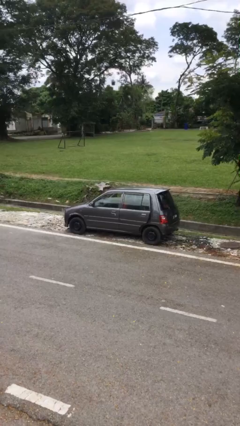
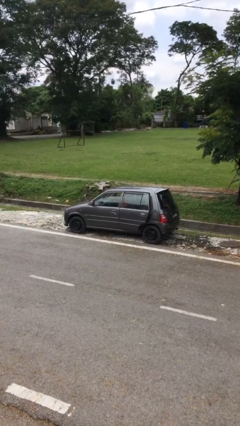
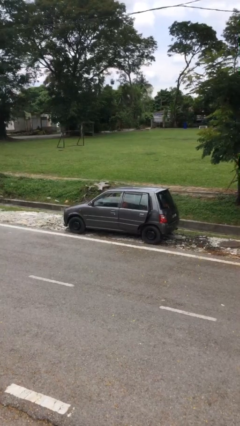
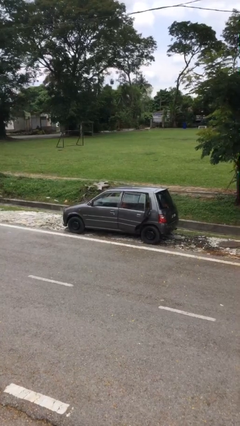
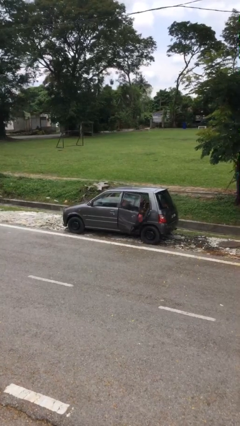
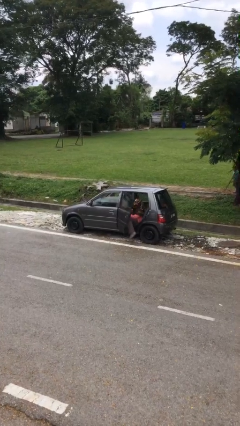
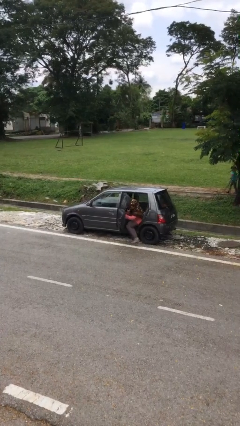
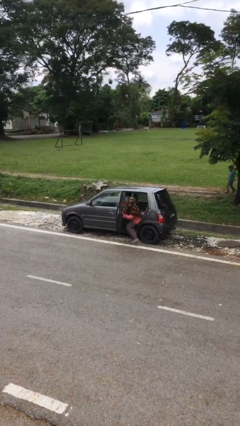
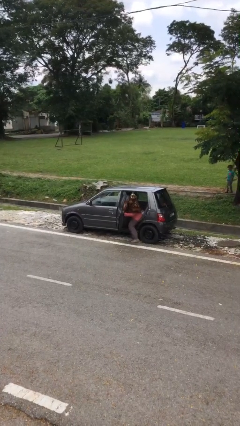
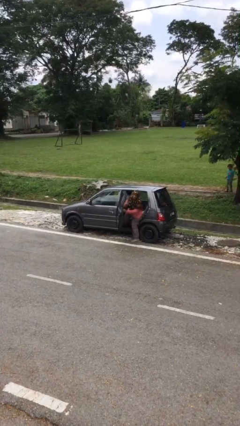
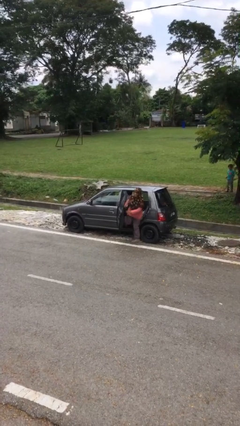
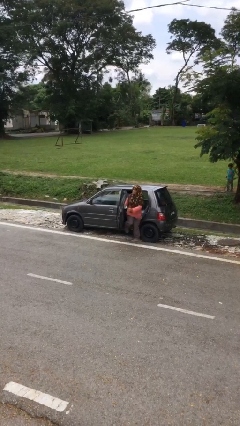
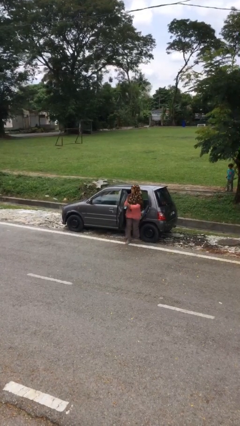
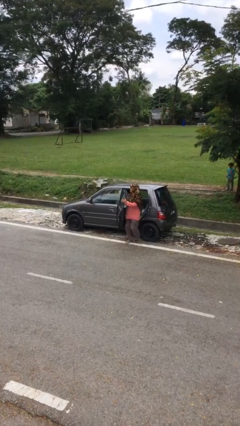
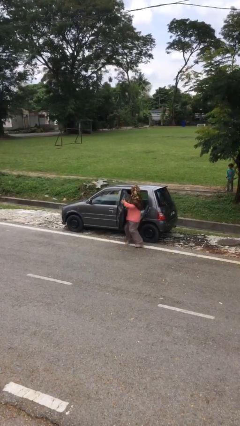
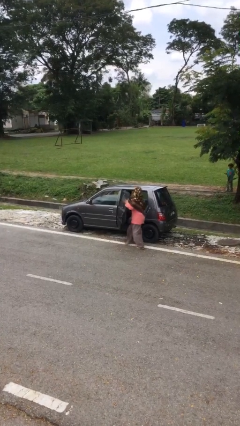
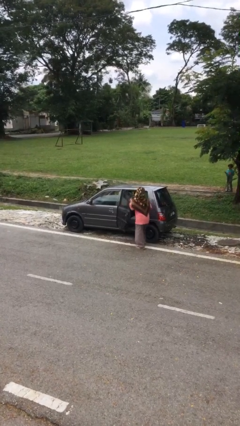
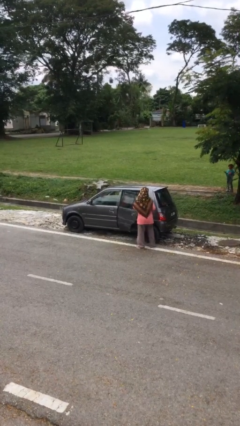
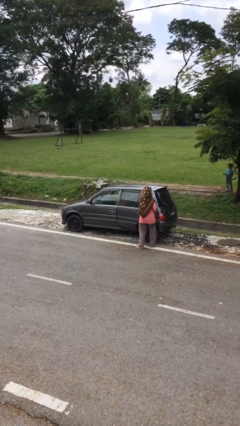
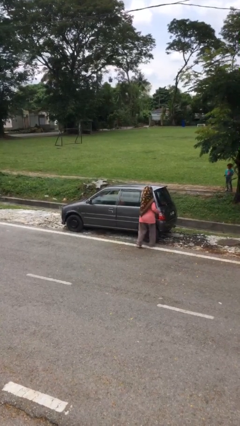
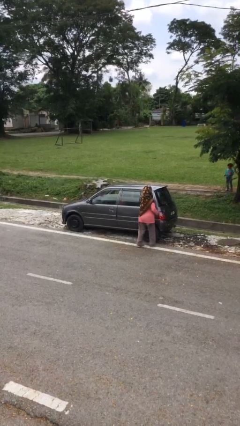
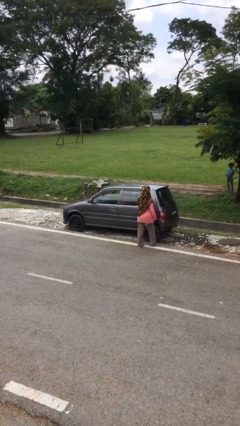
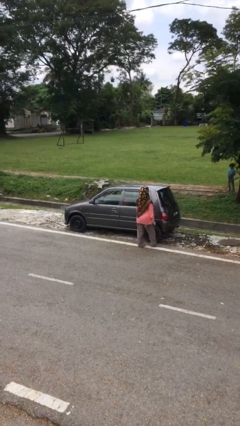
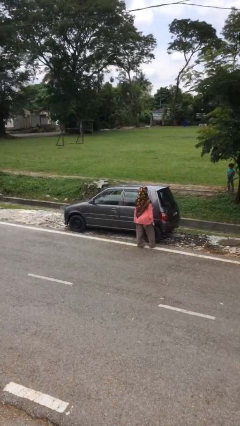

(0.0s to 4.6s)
car drops off person

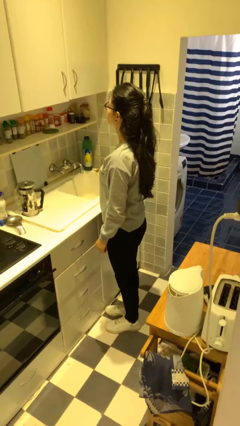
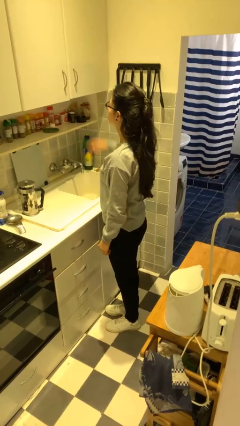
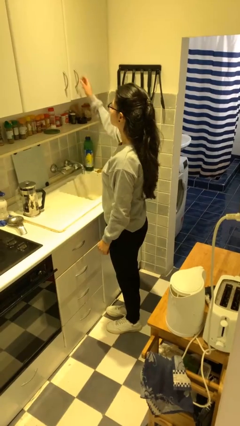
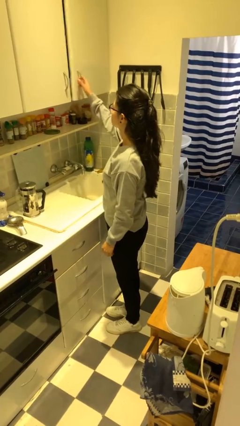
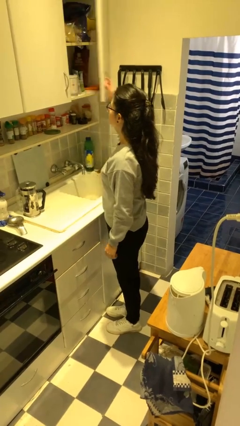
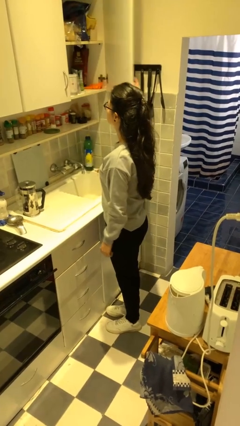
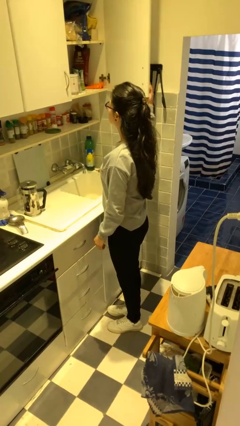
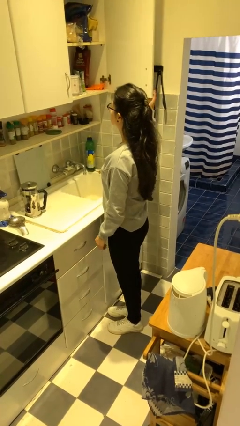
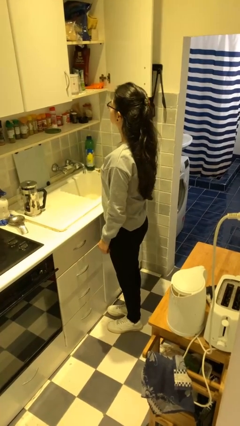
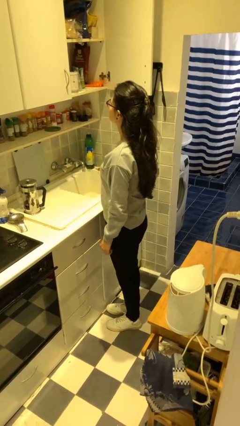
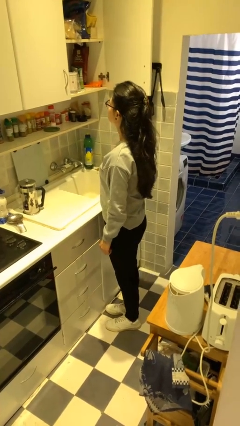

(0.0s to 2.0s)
person opens cabinet

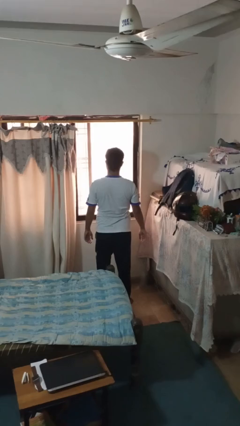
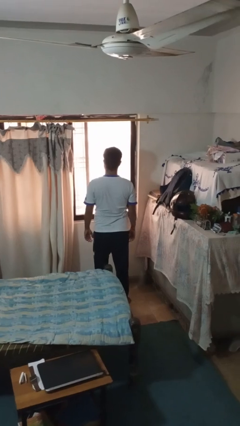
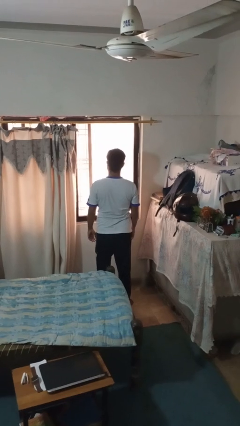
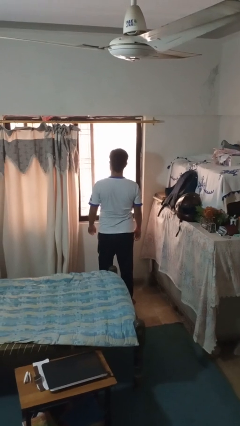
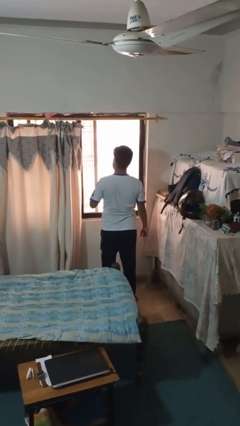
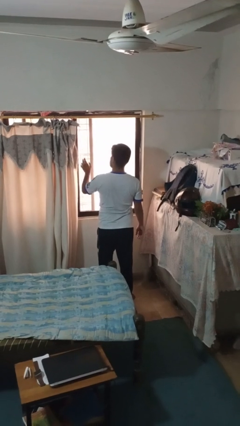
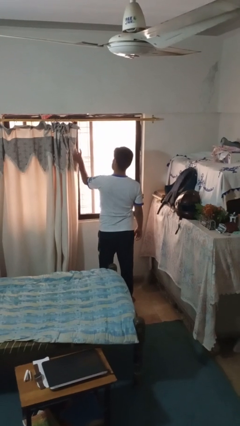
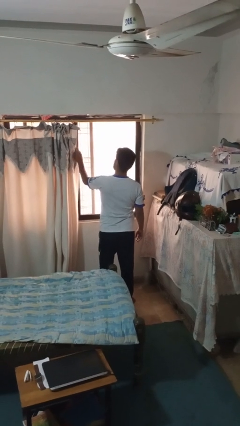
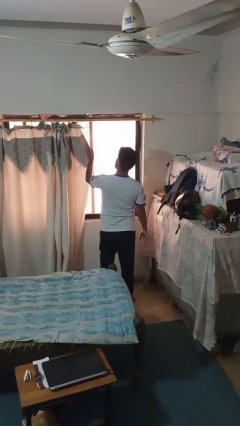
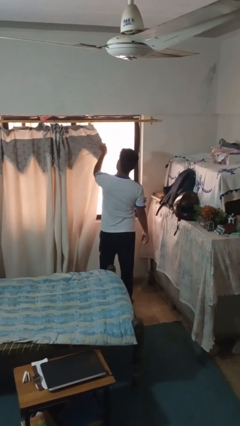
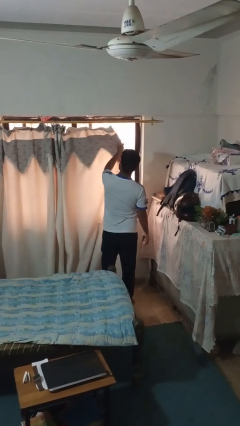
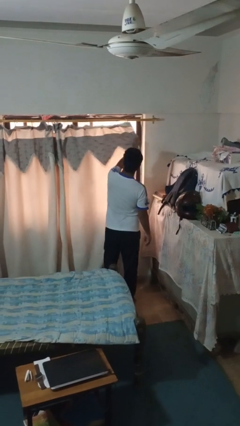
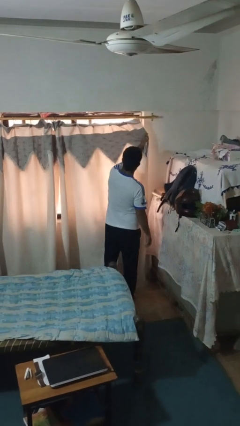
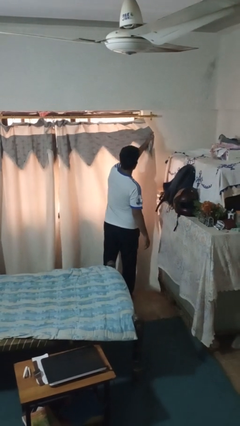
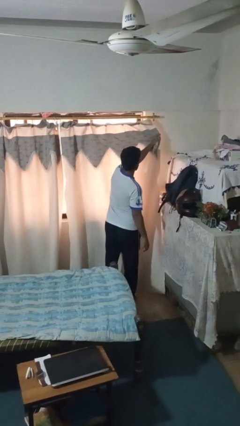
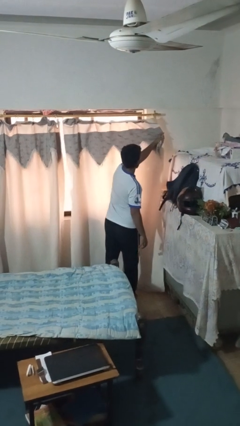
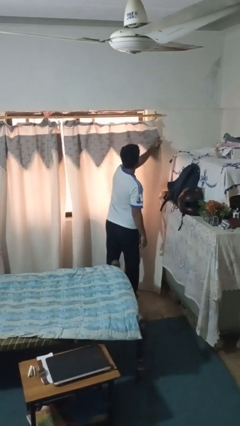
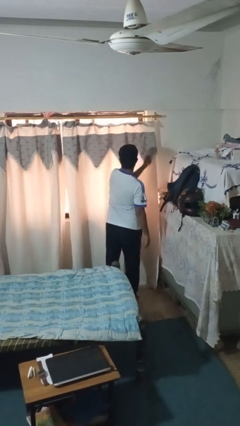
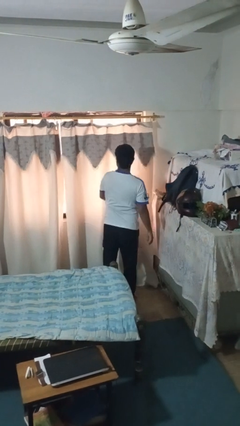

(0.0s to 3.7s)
person closes curtains

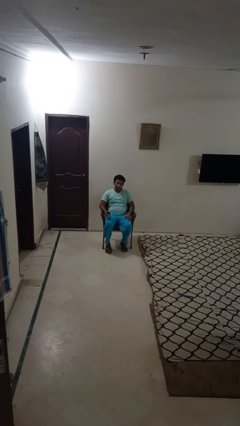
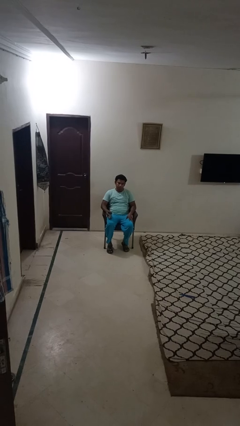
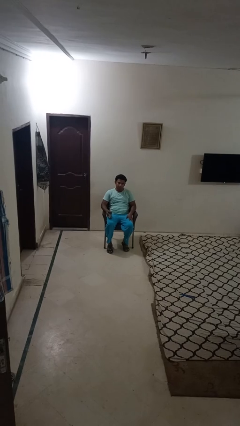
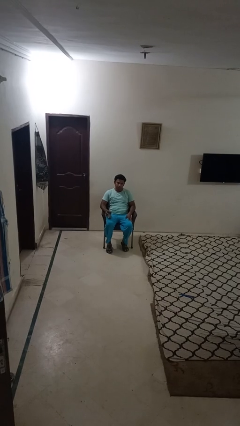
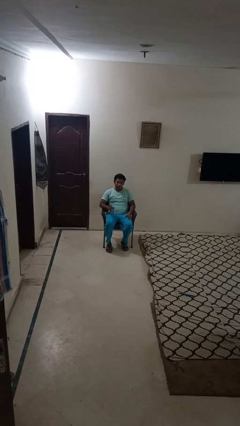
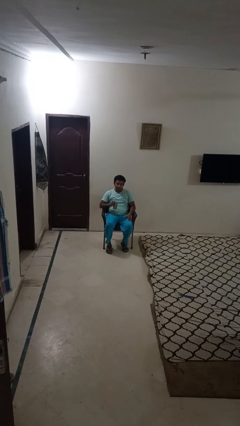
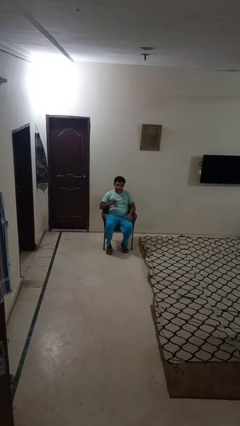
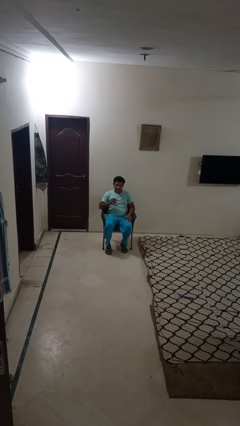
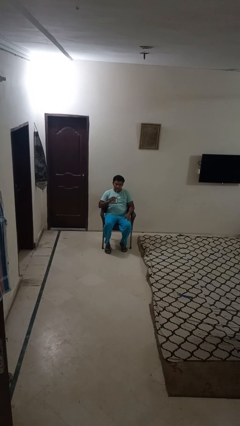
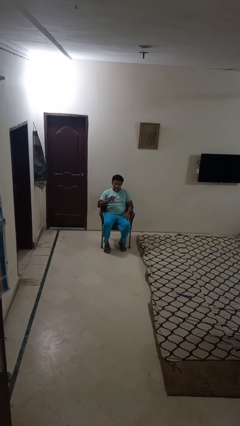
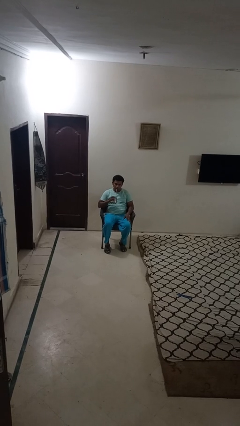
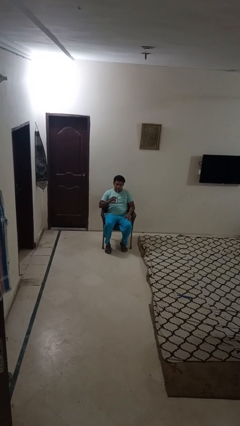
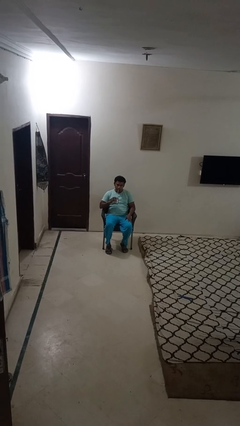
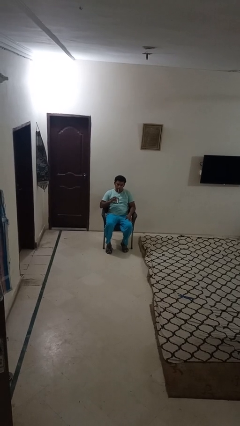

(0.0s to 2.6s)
person drinks from straw

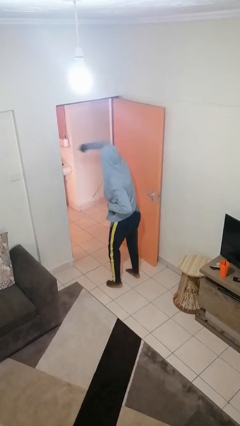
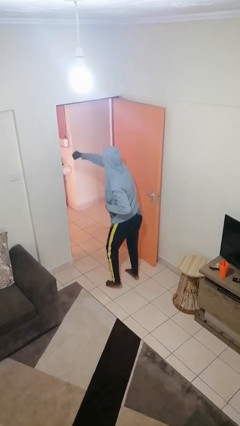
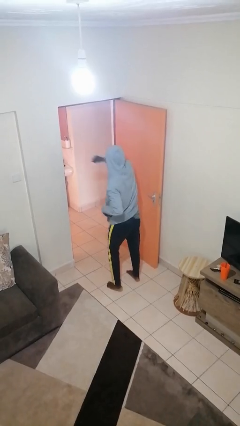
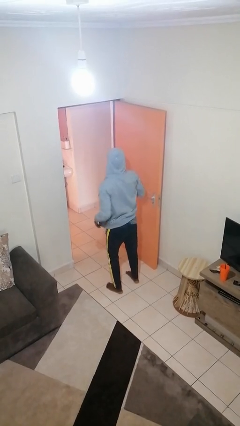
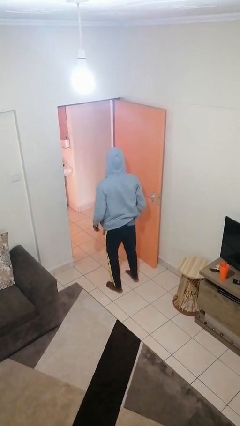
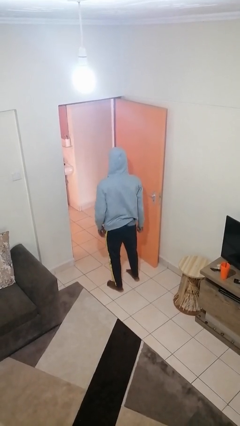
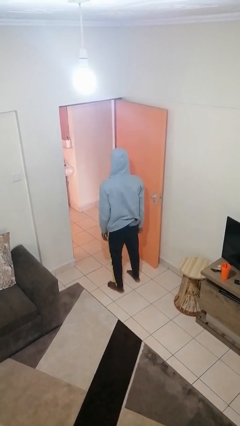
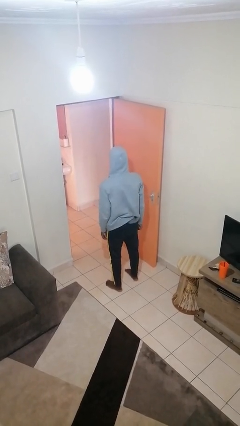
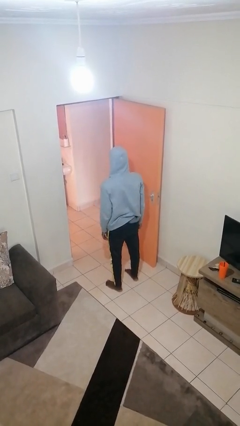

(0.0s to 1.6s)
person punches

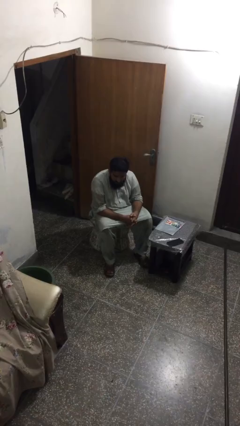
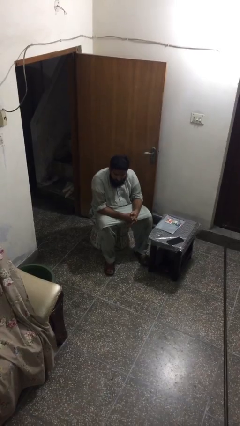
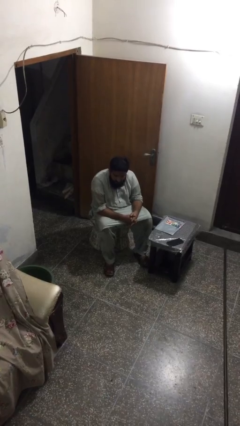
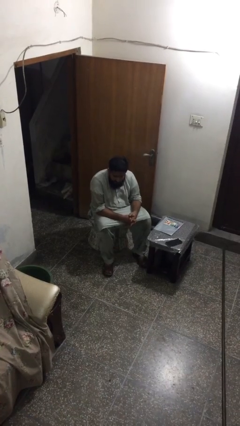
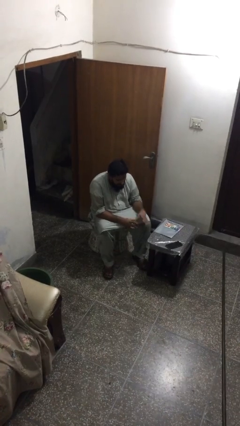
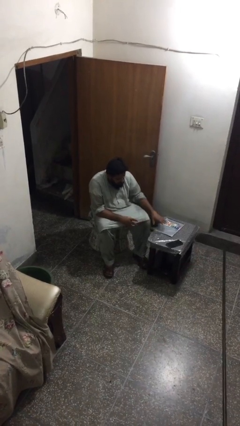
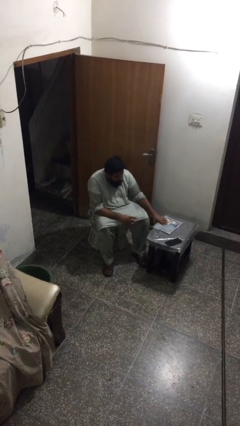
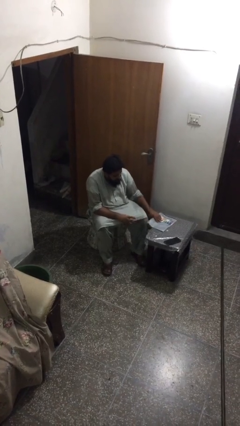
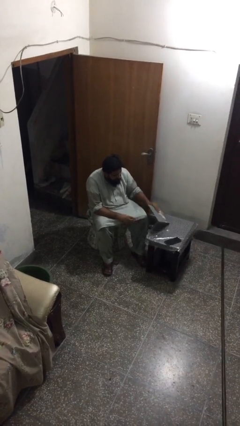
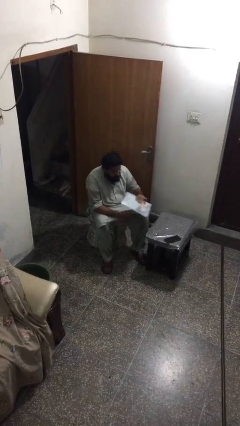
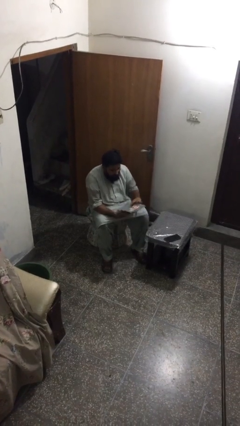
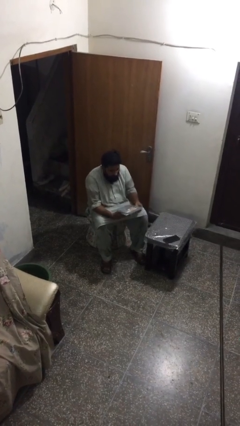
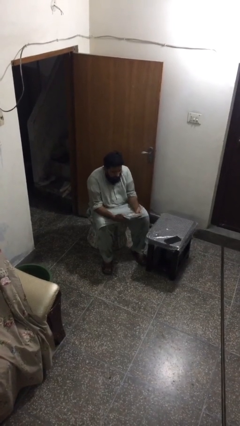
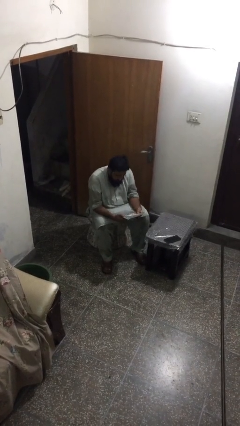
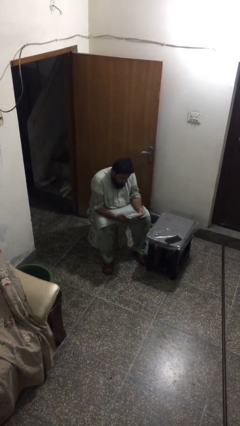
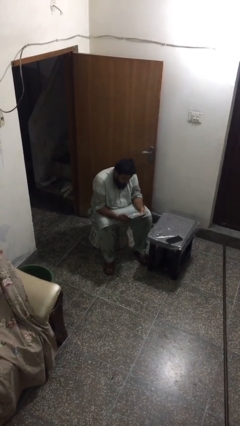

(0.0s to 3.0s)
person picks up object from table
